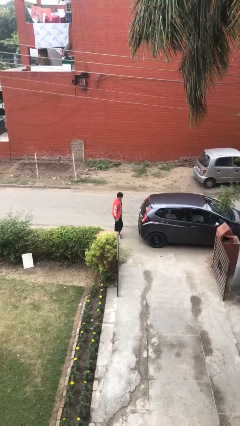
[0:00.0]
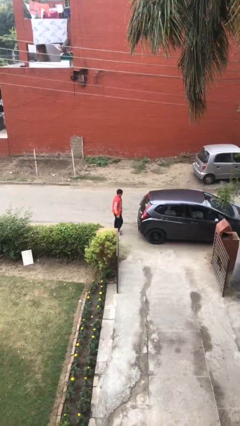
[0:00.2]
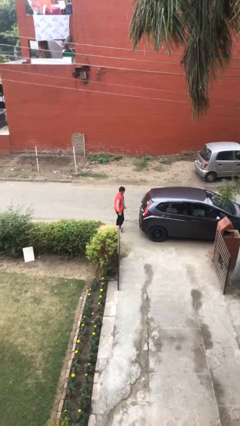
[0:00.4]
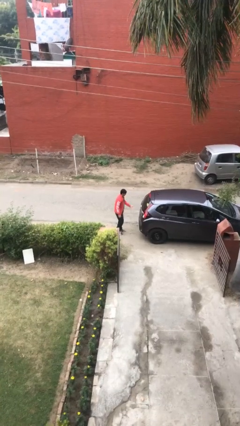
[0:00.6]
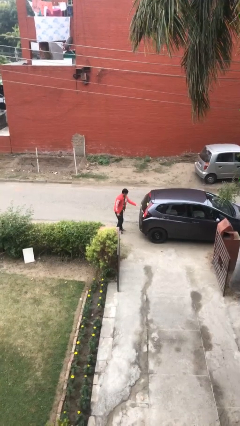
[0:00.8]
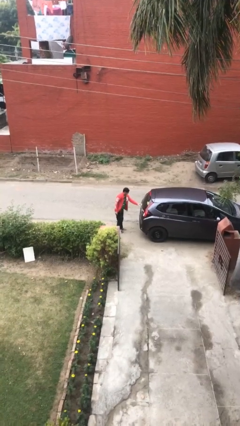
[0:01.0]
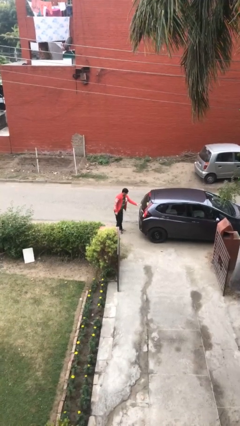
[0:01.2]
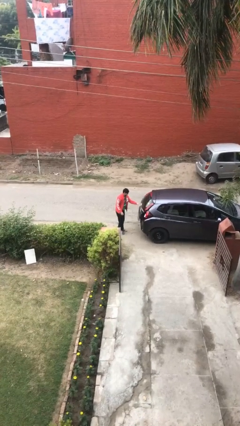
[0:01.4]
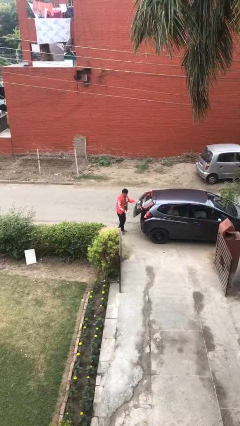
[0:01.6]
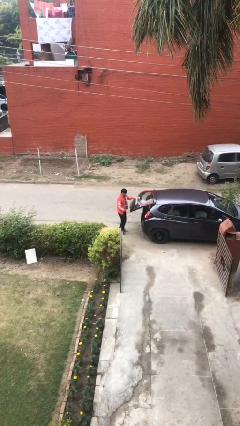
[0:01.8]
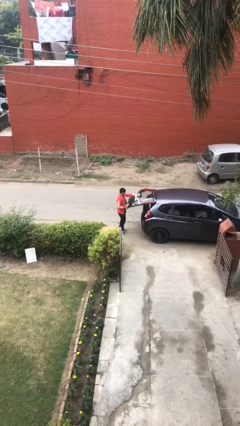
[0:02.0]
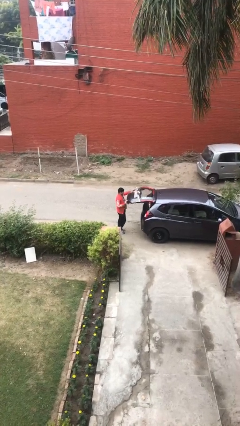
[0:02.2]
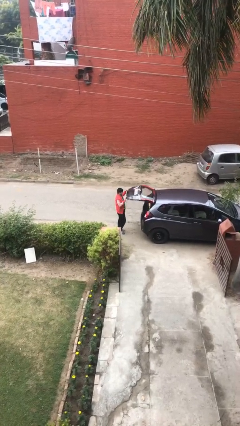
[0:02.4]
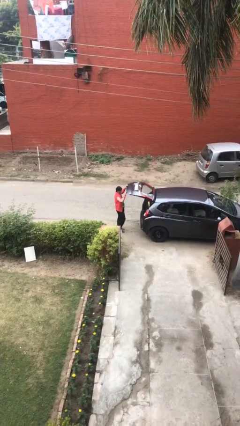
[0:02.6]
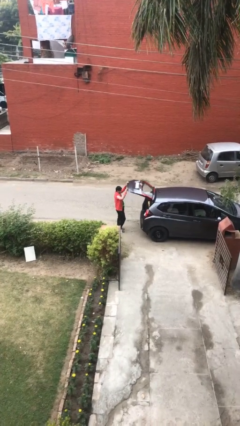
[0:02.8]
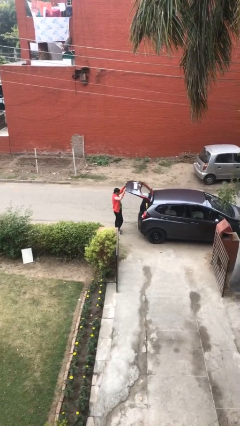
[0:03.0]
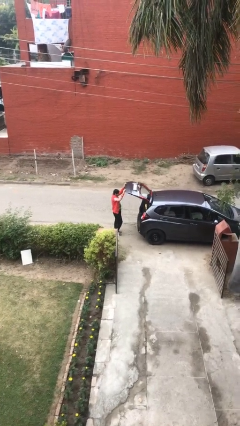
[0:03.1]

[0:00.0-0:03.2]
person opens car trunk

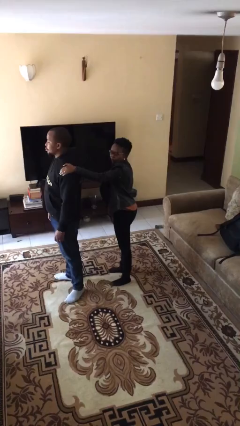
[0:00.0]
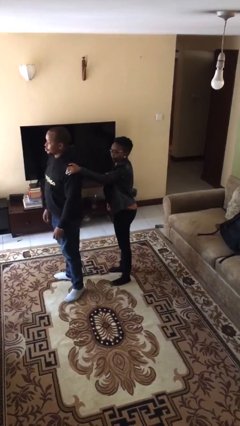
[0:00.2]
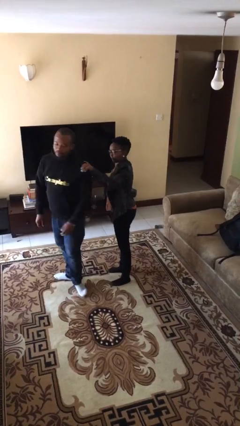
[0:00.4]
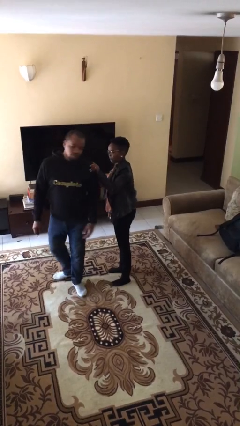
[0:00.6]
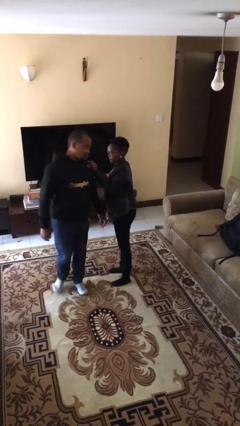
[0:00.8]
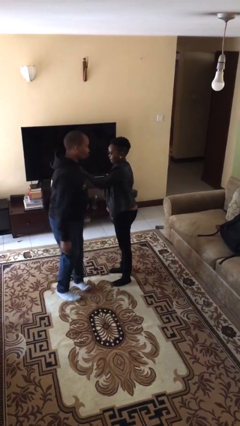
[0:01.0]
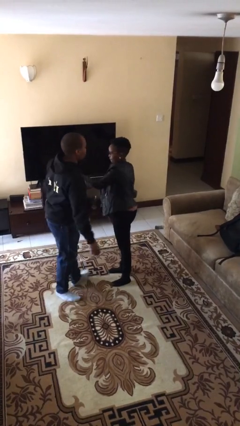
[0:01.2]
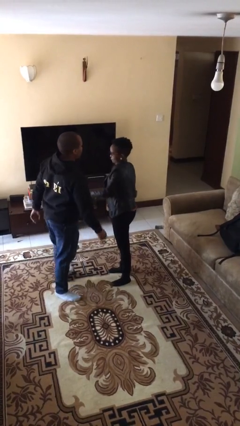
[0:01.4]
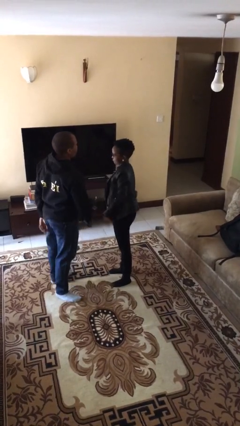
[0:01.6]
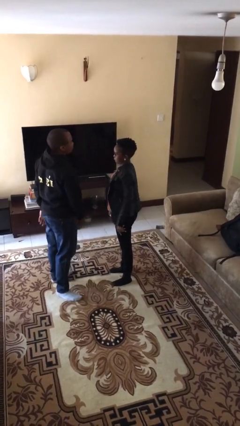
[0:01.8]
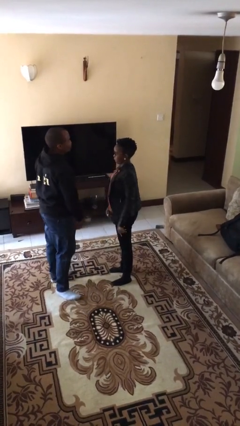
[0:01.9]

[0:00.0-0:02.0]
person spins person around

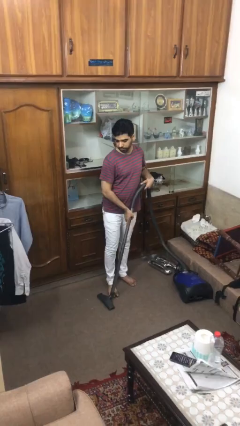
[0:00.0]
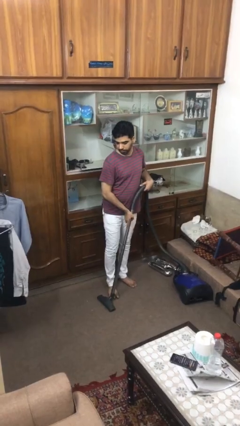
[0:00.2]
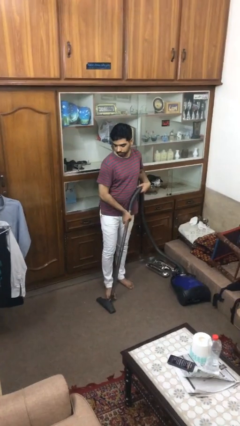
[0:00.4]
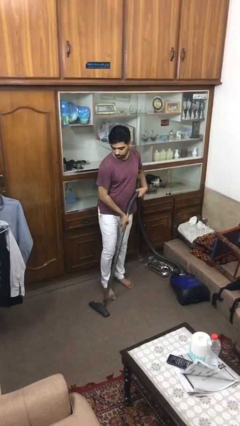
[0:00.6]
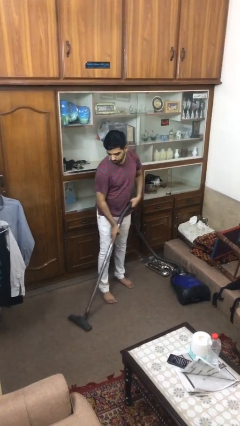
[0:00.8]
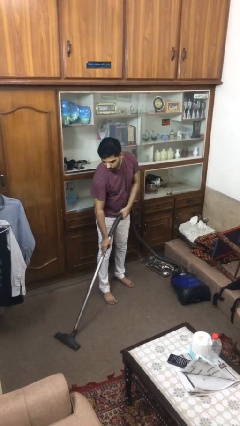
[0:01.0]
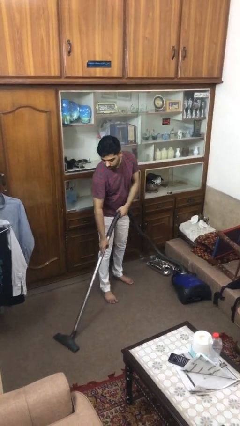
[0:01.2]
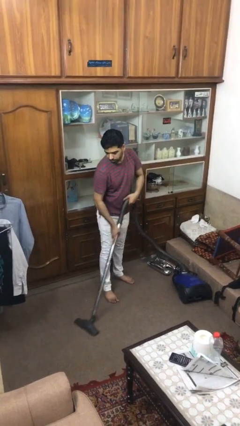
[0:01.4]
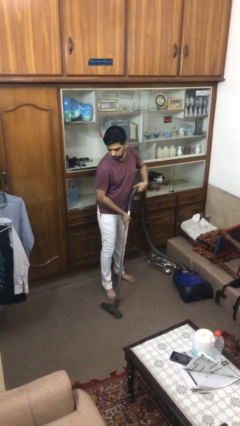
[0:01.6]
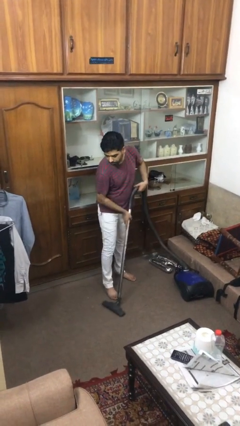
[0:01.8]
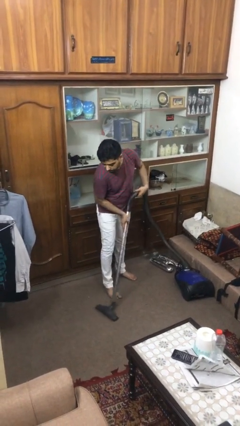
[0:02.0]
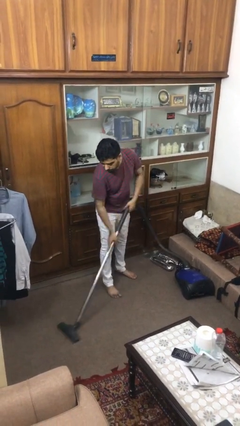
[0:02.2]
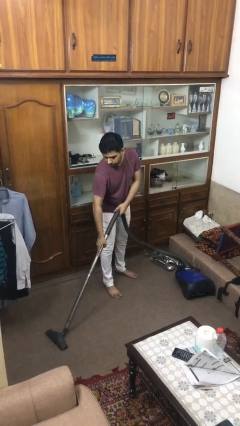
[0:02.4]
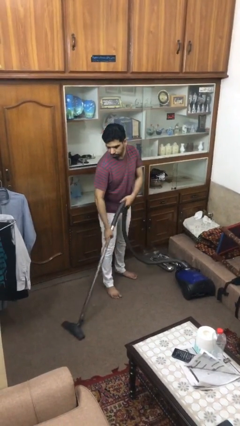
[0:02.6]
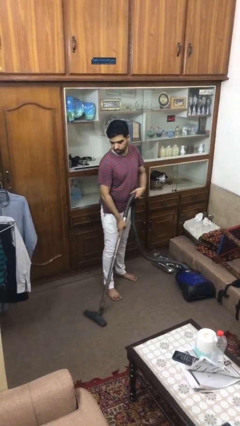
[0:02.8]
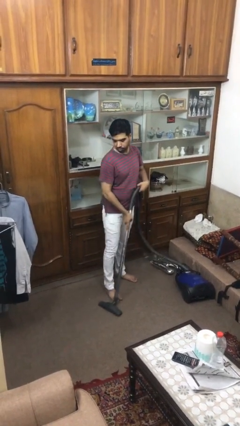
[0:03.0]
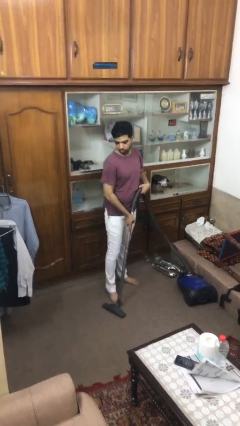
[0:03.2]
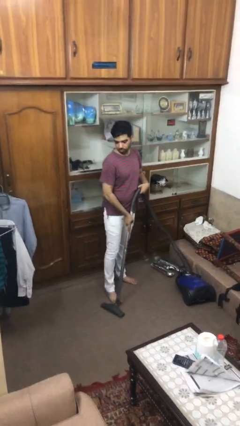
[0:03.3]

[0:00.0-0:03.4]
person vacuums carpet

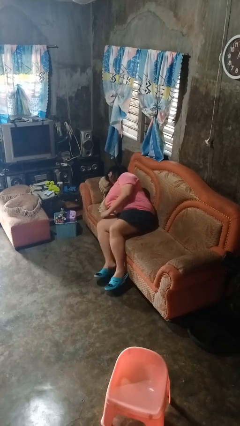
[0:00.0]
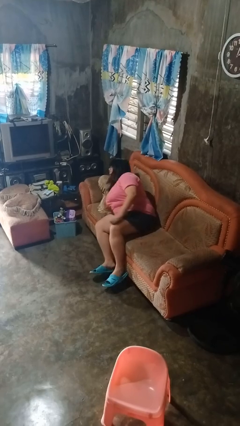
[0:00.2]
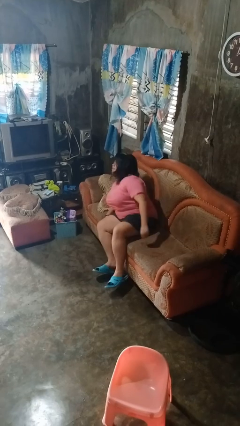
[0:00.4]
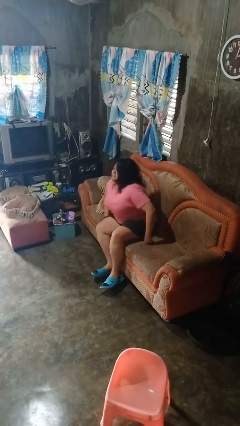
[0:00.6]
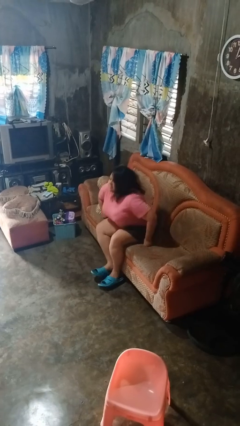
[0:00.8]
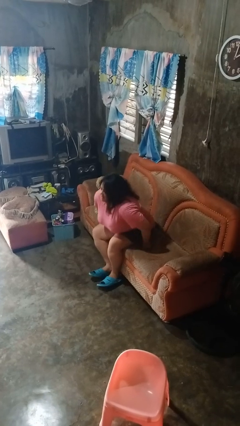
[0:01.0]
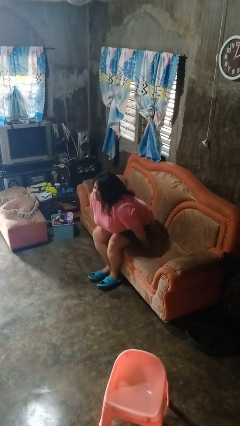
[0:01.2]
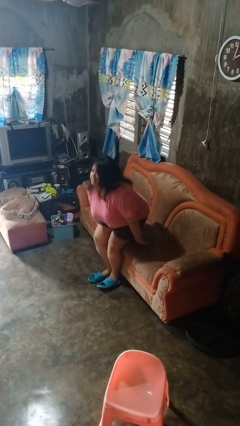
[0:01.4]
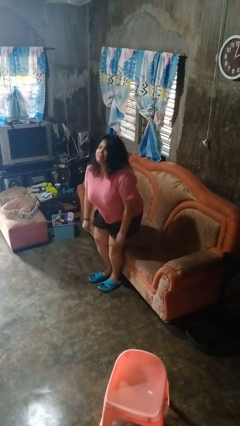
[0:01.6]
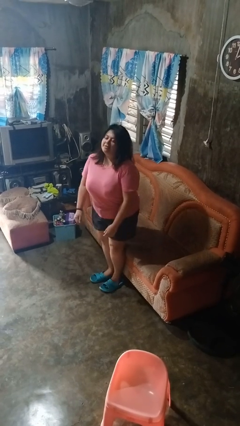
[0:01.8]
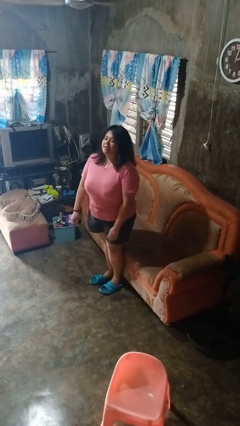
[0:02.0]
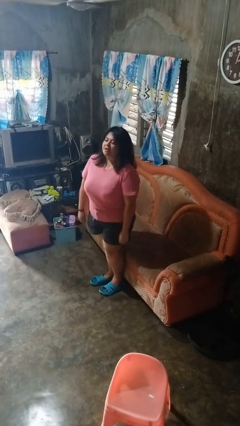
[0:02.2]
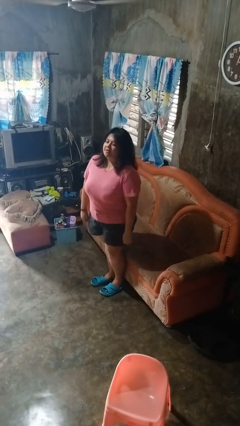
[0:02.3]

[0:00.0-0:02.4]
person stands up

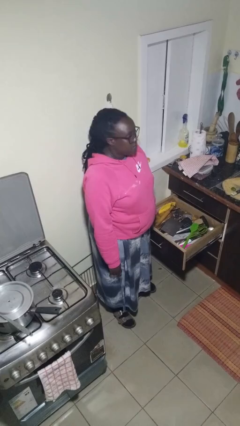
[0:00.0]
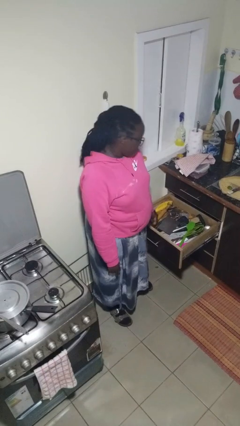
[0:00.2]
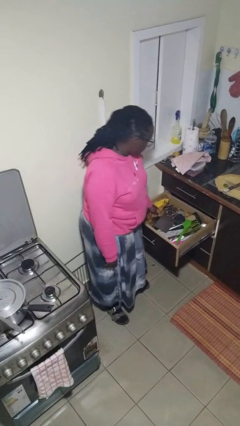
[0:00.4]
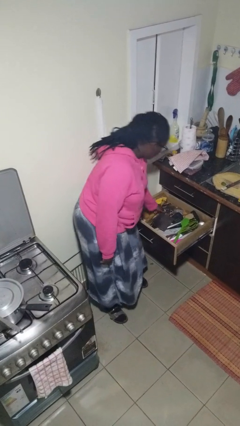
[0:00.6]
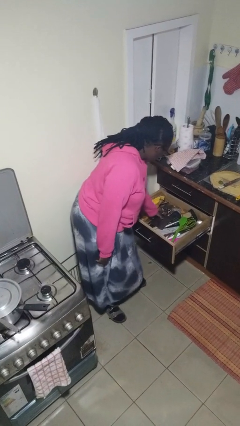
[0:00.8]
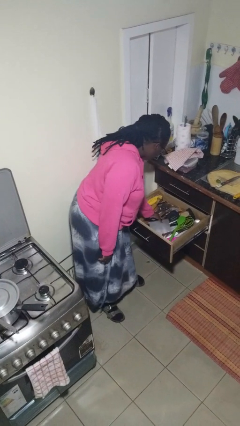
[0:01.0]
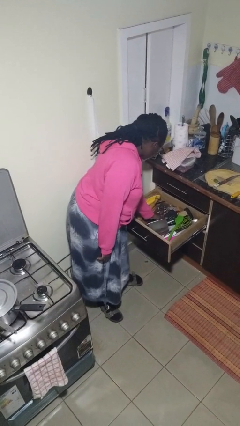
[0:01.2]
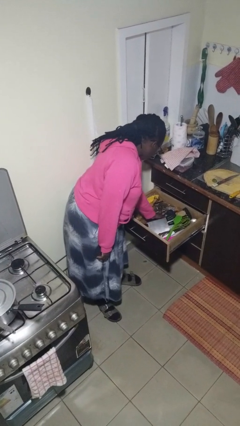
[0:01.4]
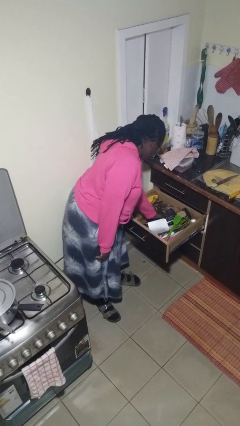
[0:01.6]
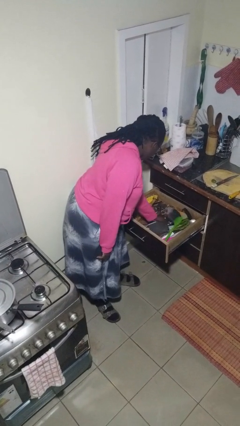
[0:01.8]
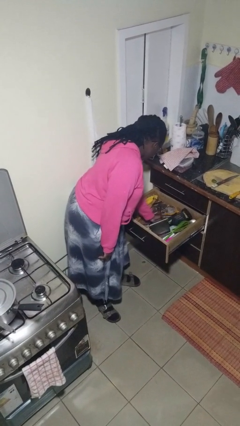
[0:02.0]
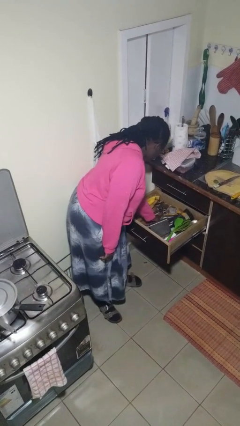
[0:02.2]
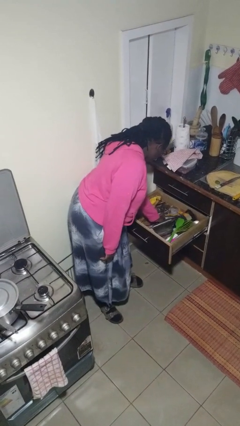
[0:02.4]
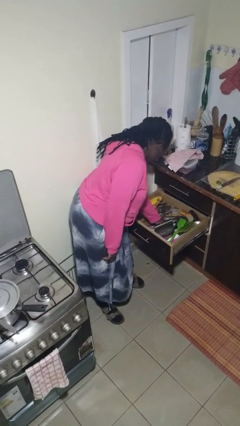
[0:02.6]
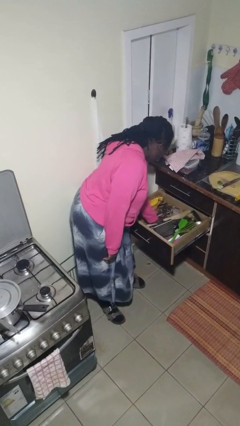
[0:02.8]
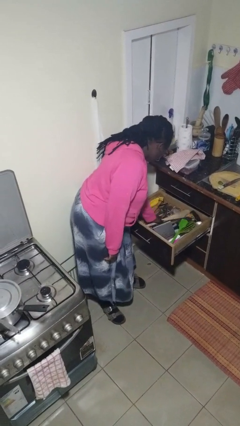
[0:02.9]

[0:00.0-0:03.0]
person searches in kitchen drawer

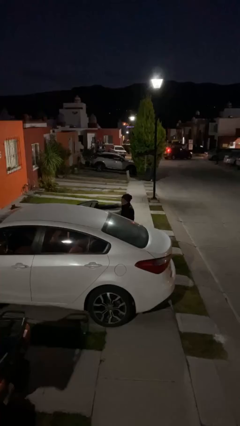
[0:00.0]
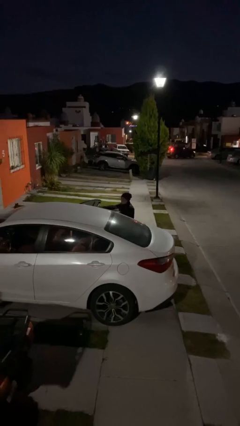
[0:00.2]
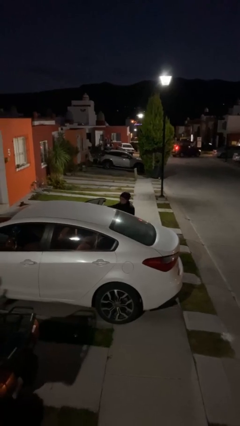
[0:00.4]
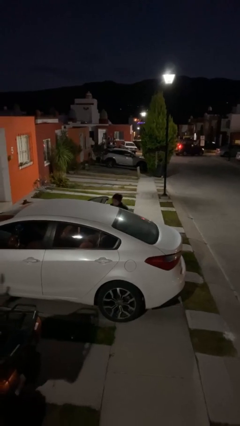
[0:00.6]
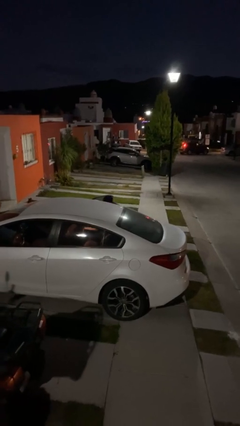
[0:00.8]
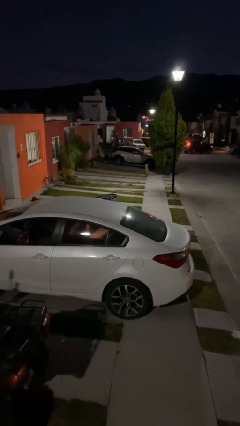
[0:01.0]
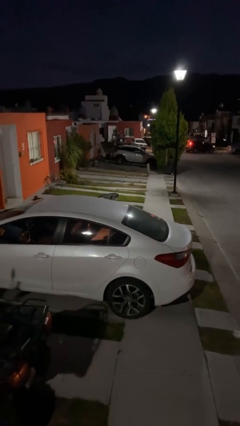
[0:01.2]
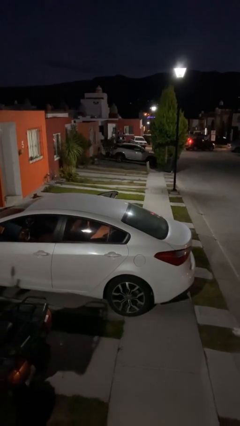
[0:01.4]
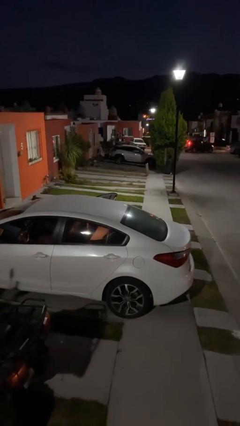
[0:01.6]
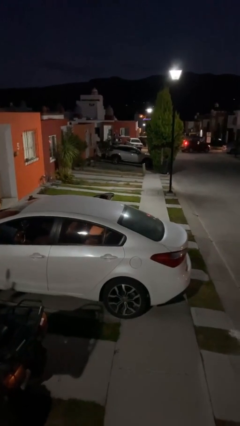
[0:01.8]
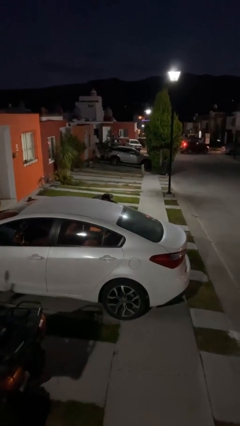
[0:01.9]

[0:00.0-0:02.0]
person loads car

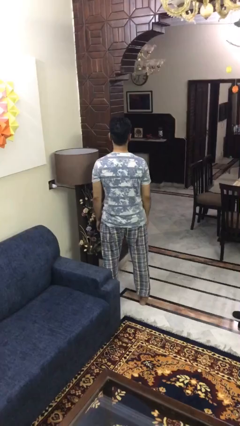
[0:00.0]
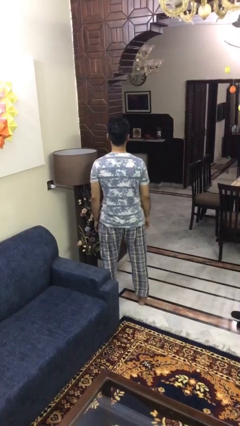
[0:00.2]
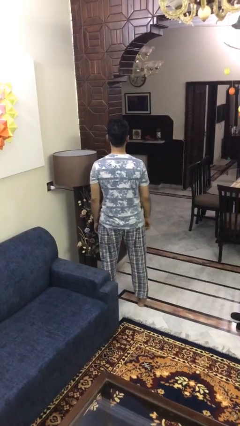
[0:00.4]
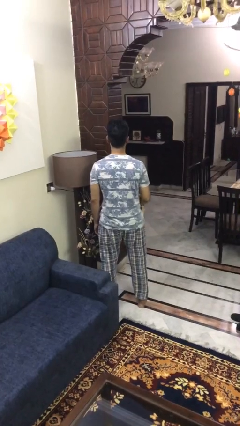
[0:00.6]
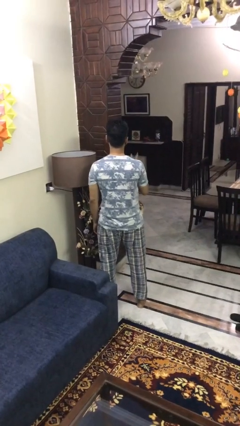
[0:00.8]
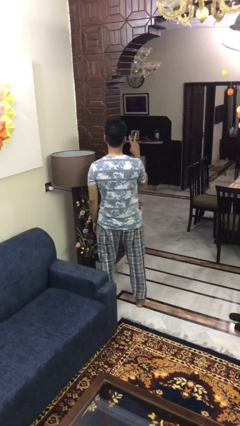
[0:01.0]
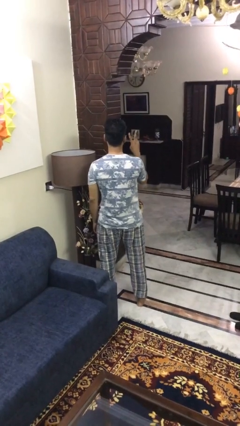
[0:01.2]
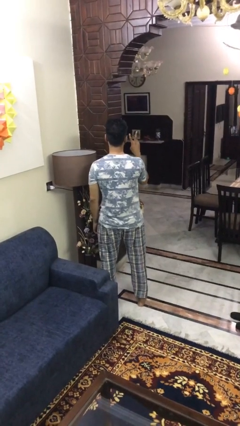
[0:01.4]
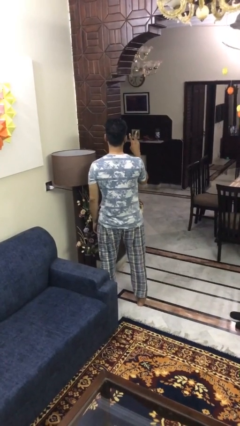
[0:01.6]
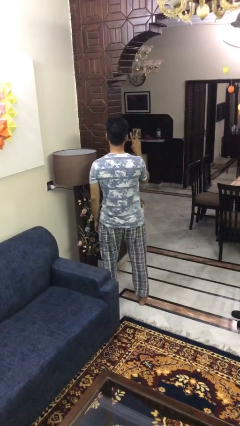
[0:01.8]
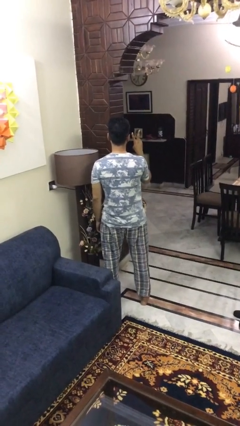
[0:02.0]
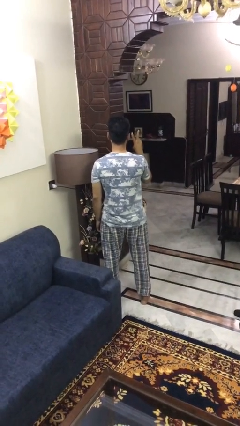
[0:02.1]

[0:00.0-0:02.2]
person gestures peace
